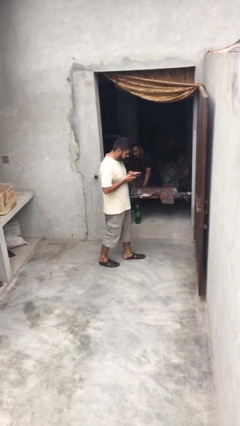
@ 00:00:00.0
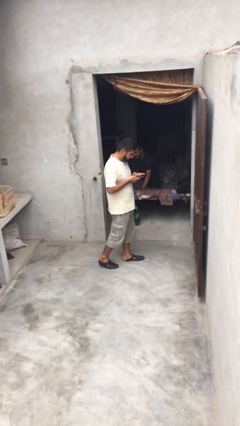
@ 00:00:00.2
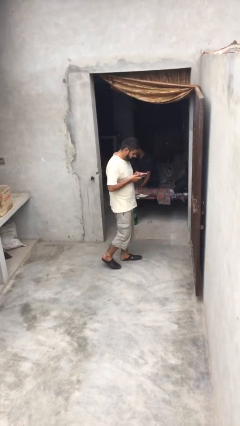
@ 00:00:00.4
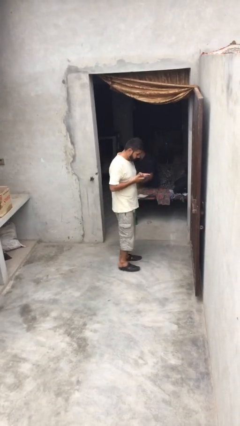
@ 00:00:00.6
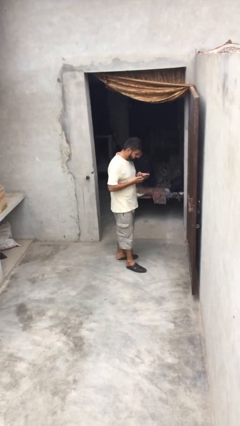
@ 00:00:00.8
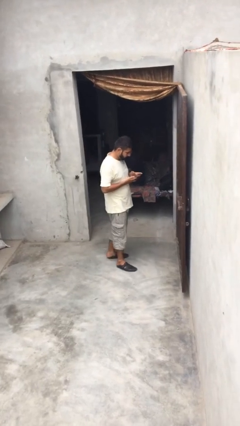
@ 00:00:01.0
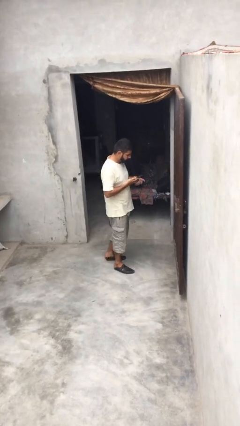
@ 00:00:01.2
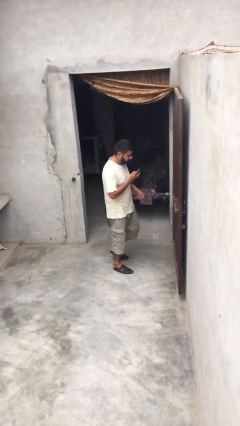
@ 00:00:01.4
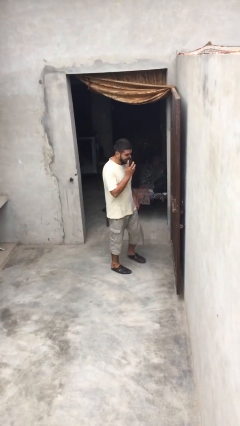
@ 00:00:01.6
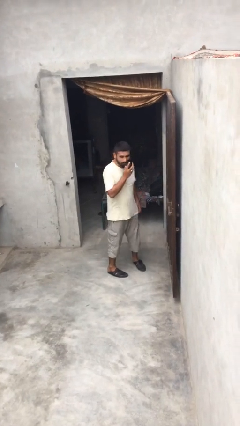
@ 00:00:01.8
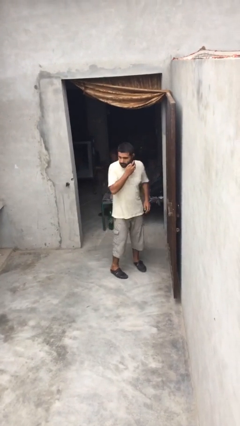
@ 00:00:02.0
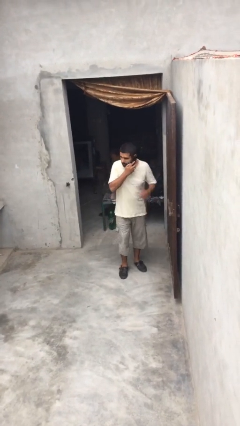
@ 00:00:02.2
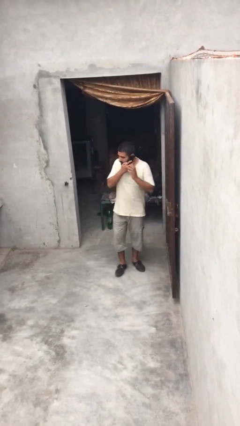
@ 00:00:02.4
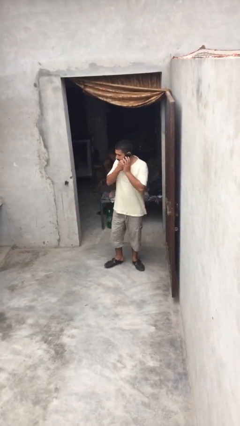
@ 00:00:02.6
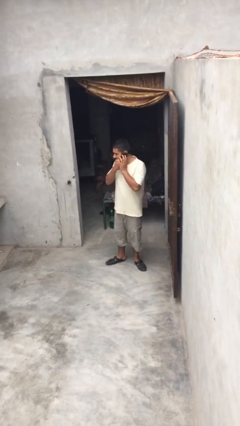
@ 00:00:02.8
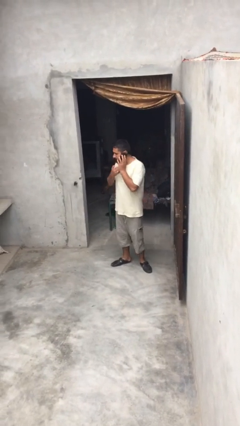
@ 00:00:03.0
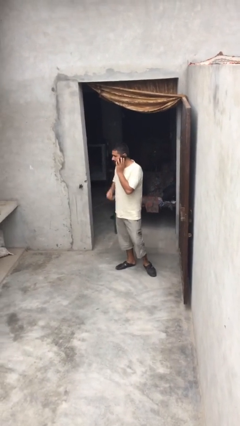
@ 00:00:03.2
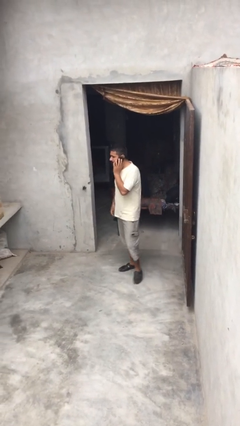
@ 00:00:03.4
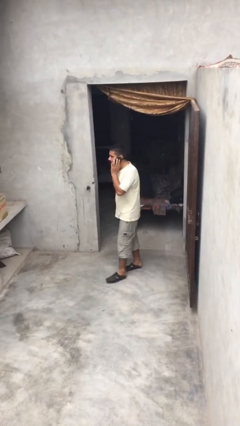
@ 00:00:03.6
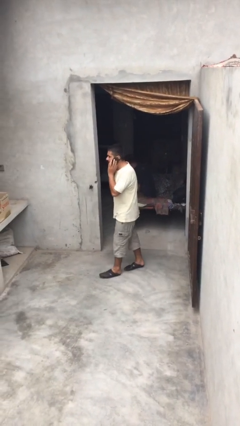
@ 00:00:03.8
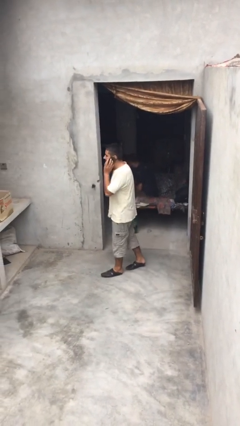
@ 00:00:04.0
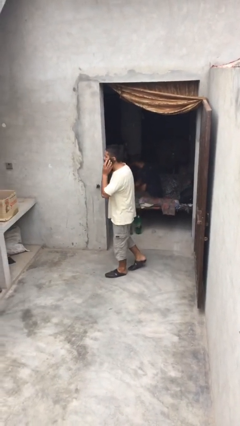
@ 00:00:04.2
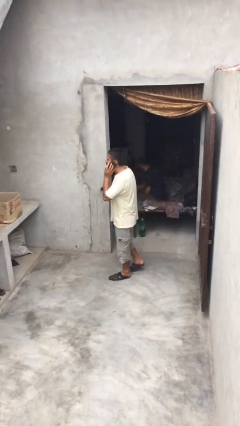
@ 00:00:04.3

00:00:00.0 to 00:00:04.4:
person talks on phone

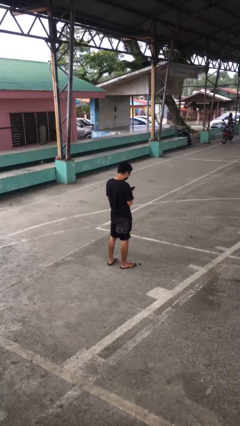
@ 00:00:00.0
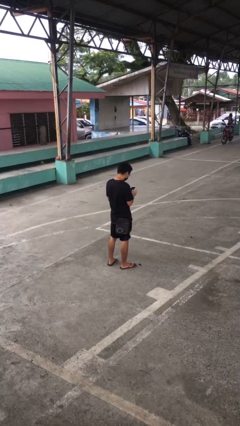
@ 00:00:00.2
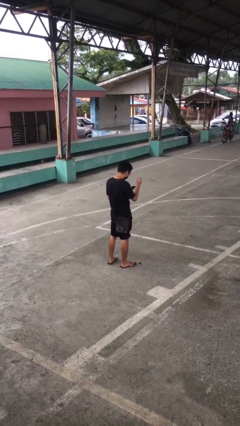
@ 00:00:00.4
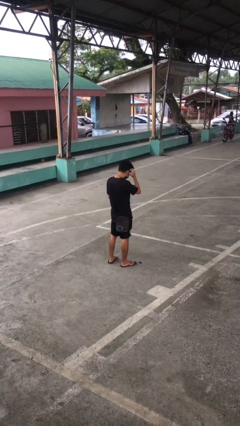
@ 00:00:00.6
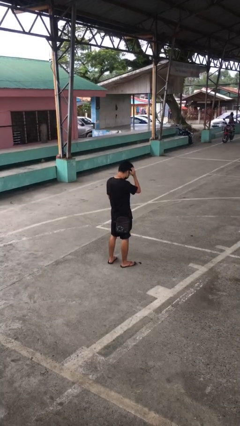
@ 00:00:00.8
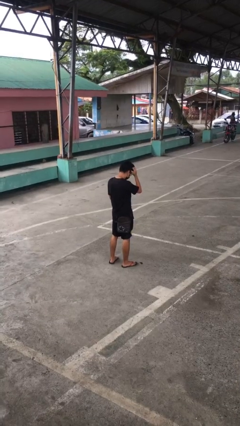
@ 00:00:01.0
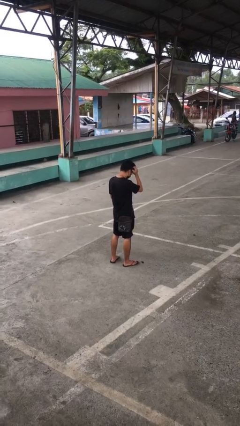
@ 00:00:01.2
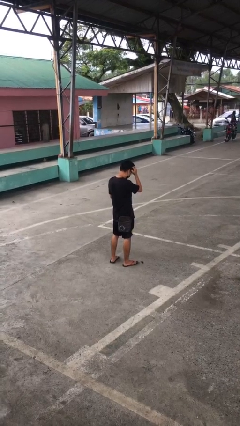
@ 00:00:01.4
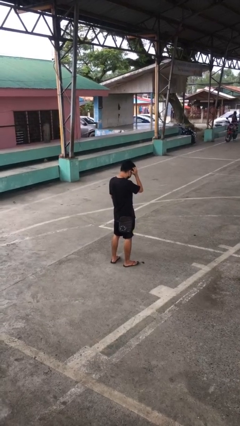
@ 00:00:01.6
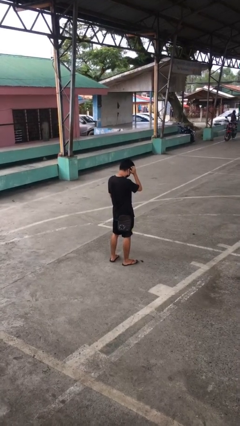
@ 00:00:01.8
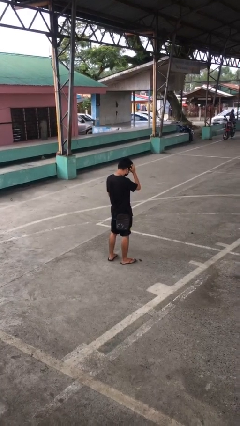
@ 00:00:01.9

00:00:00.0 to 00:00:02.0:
person scratches face

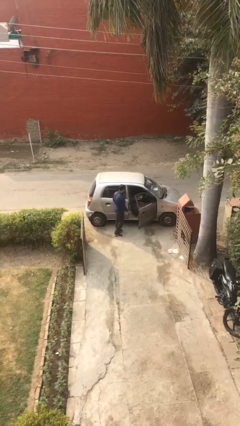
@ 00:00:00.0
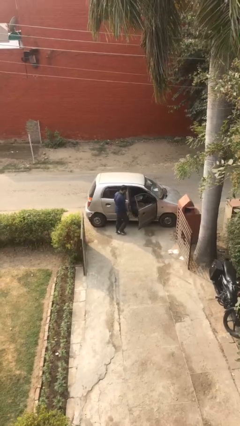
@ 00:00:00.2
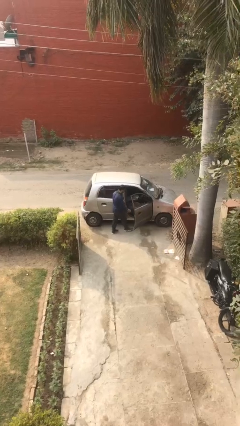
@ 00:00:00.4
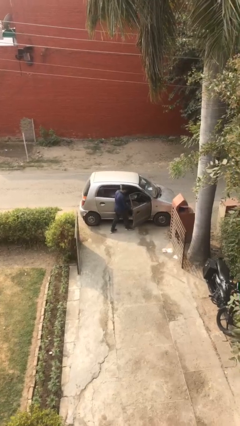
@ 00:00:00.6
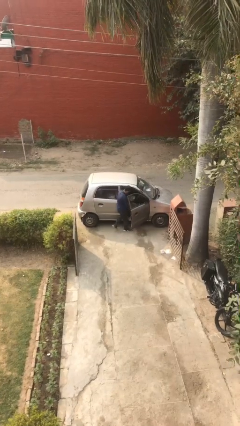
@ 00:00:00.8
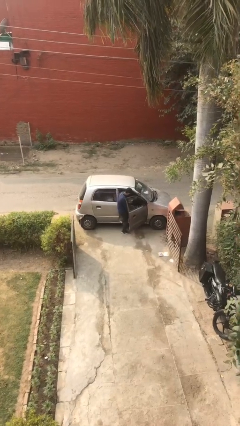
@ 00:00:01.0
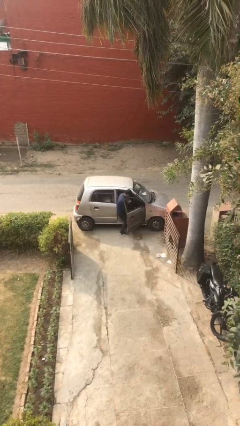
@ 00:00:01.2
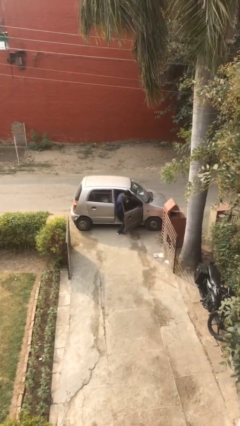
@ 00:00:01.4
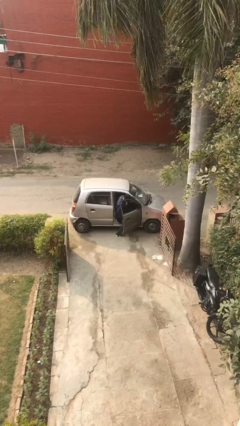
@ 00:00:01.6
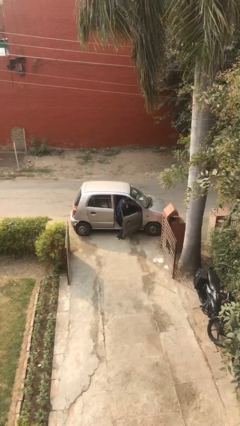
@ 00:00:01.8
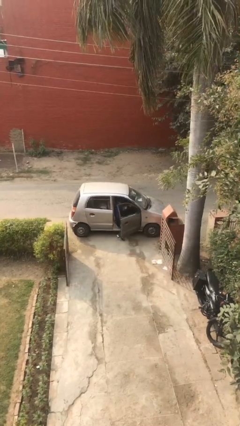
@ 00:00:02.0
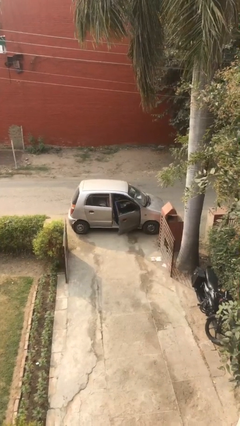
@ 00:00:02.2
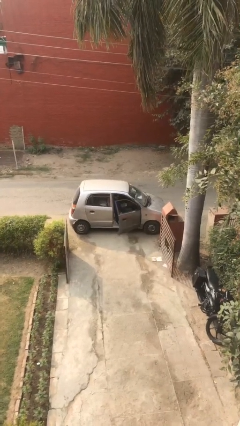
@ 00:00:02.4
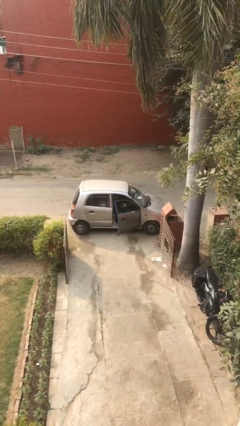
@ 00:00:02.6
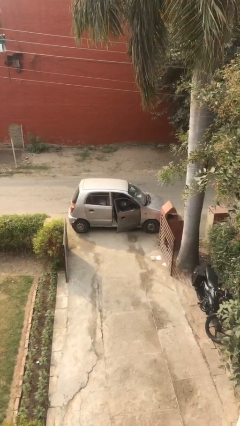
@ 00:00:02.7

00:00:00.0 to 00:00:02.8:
person enters car

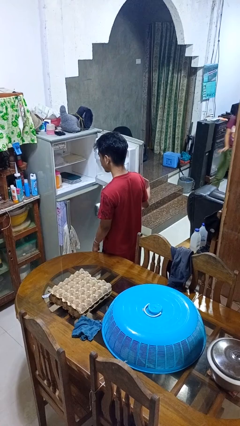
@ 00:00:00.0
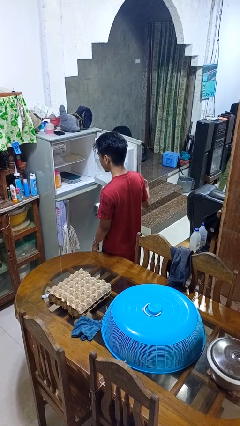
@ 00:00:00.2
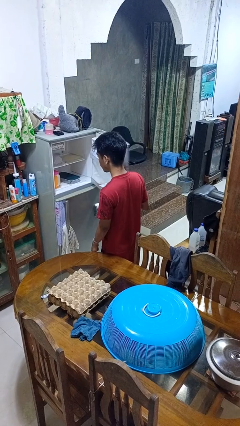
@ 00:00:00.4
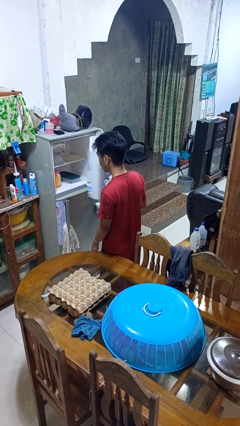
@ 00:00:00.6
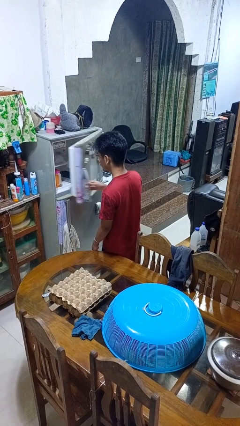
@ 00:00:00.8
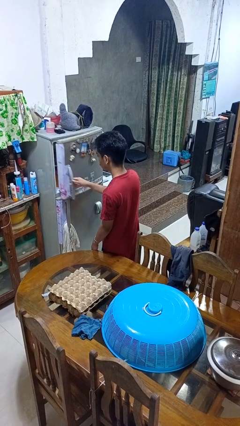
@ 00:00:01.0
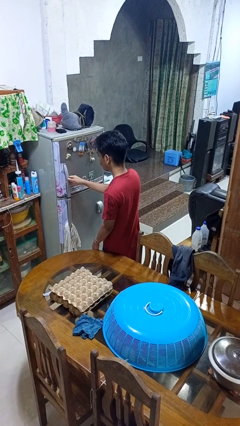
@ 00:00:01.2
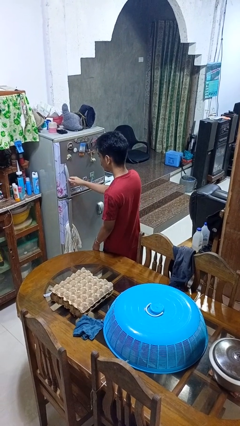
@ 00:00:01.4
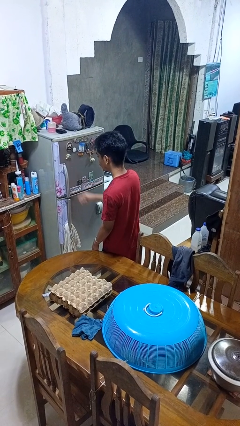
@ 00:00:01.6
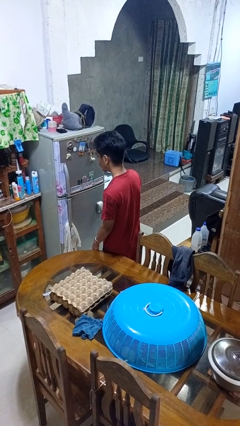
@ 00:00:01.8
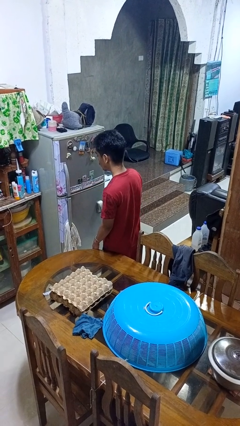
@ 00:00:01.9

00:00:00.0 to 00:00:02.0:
person closes refrigerator

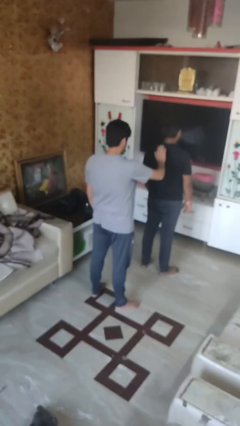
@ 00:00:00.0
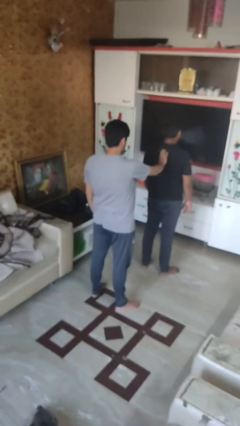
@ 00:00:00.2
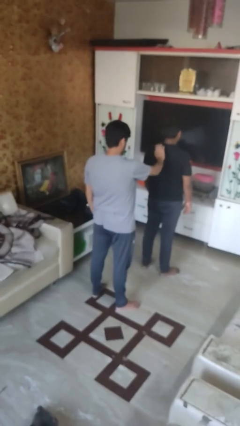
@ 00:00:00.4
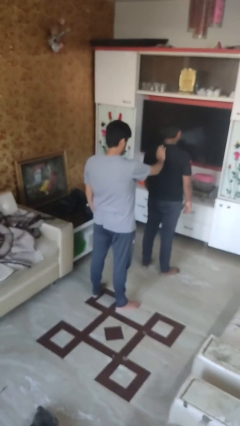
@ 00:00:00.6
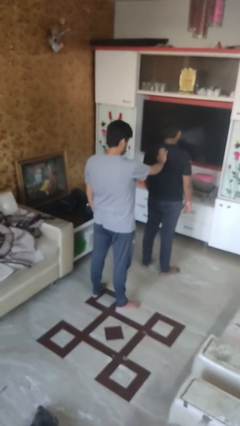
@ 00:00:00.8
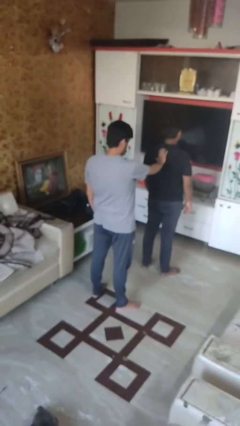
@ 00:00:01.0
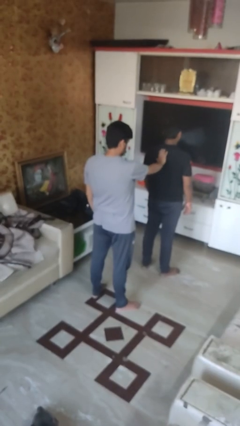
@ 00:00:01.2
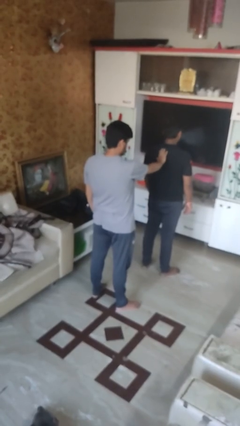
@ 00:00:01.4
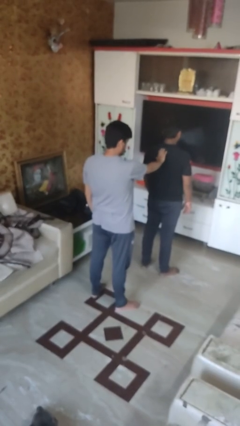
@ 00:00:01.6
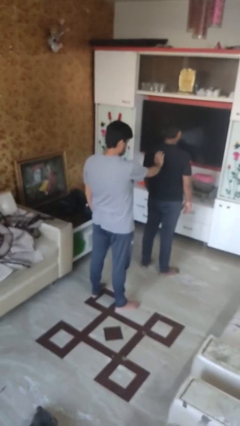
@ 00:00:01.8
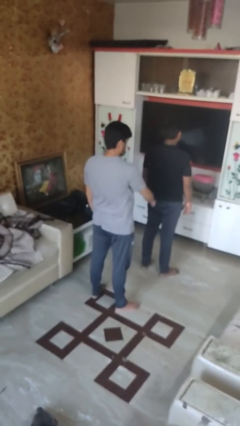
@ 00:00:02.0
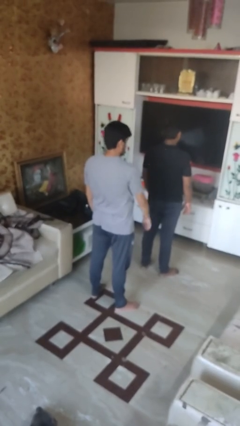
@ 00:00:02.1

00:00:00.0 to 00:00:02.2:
person touches back of person

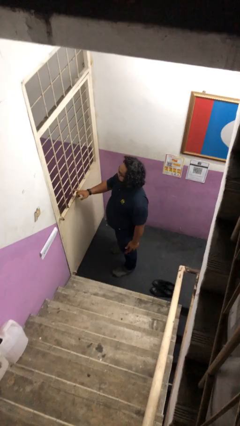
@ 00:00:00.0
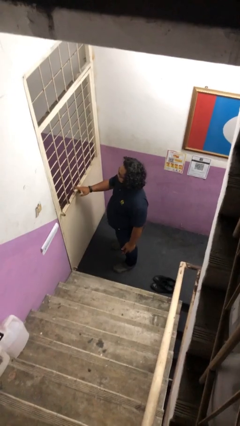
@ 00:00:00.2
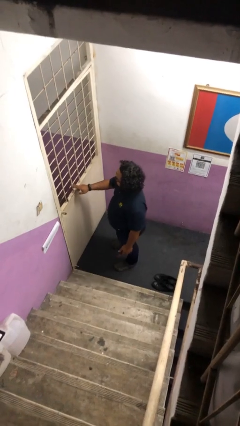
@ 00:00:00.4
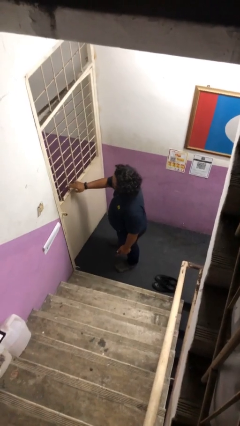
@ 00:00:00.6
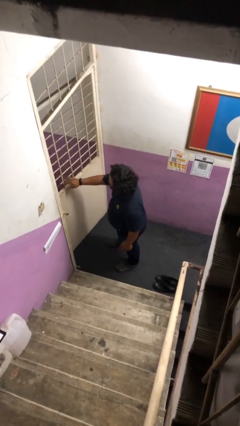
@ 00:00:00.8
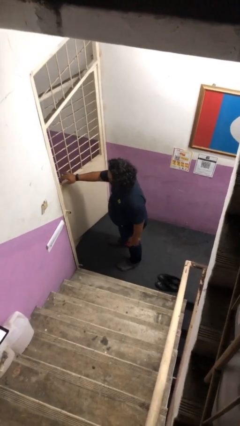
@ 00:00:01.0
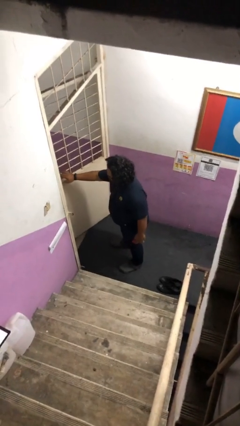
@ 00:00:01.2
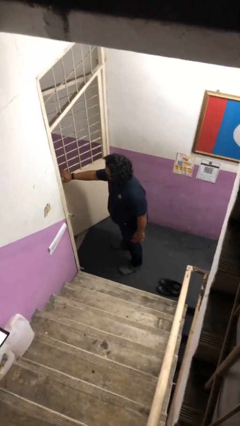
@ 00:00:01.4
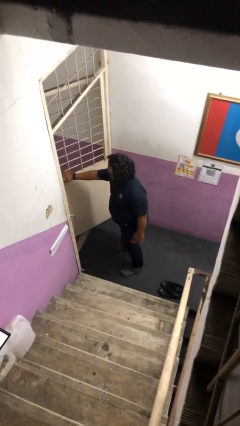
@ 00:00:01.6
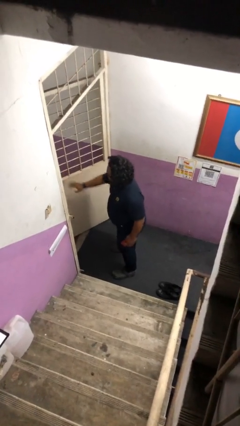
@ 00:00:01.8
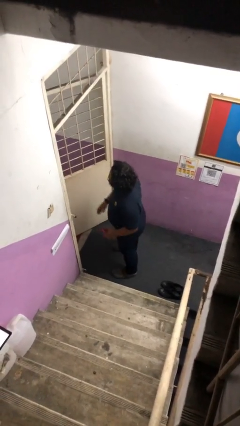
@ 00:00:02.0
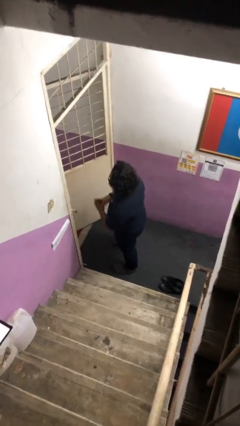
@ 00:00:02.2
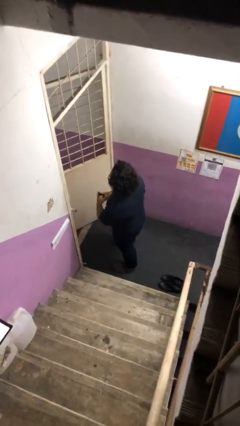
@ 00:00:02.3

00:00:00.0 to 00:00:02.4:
person opens facility door

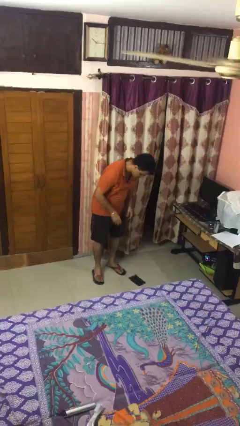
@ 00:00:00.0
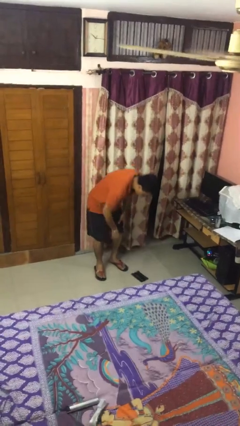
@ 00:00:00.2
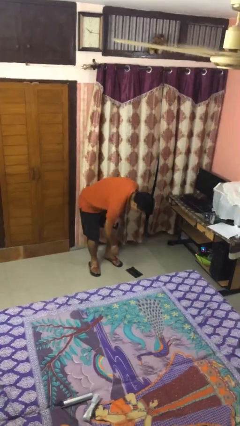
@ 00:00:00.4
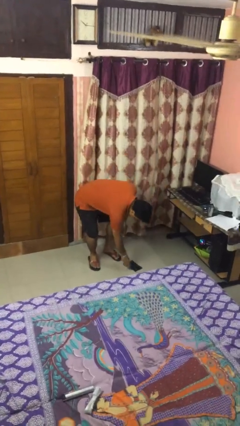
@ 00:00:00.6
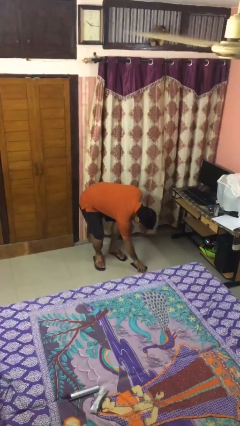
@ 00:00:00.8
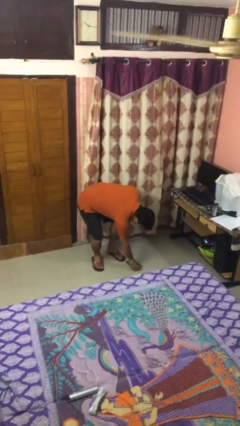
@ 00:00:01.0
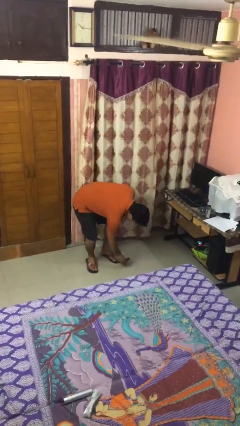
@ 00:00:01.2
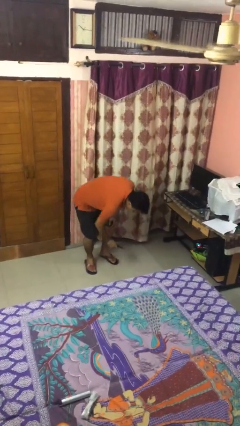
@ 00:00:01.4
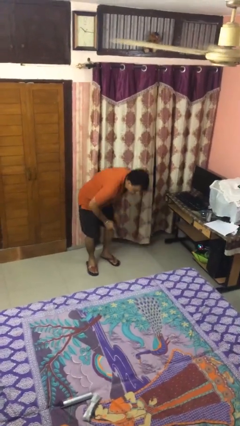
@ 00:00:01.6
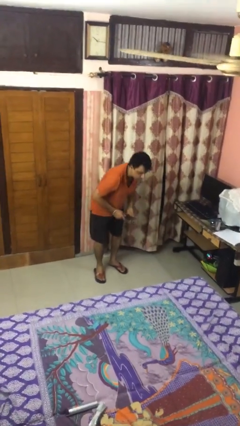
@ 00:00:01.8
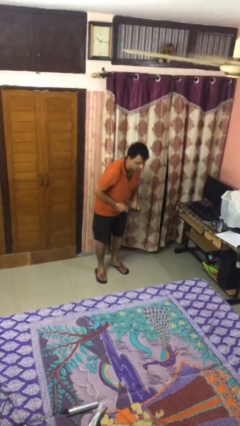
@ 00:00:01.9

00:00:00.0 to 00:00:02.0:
person picks up object from floor
